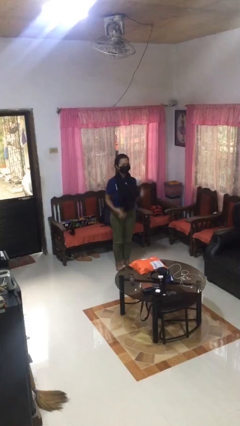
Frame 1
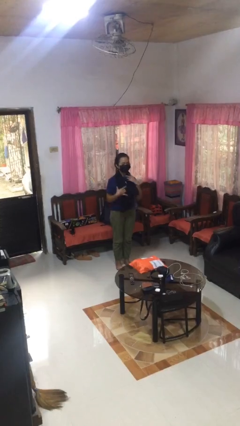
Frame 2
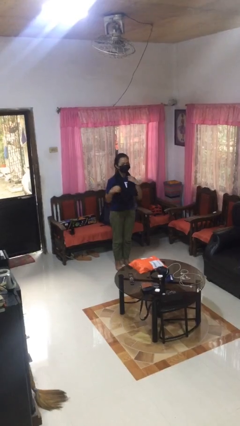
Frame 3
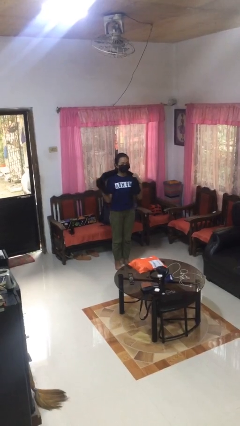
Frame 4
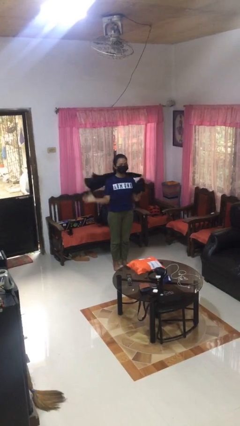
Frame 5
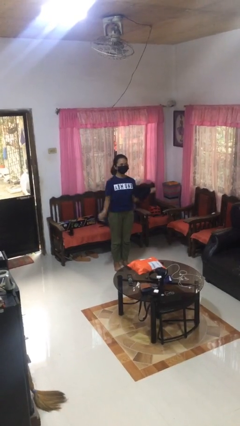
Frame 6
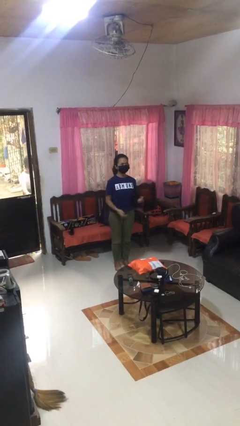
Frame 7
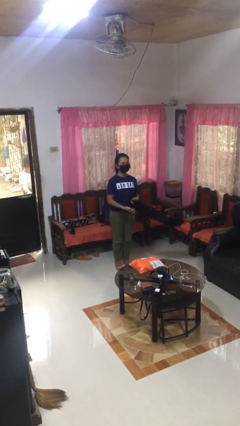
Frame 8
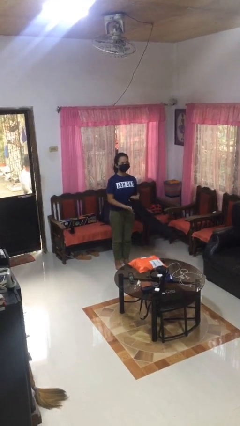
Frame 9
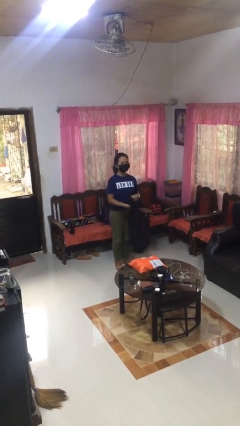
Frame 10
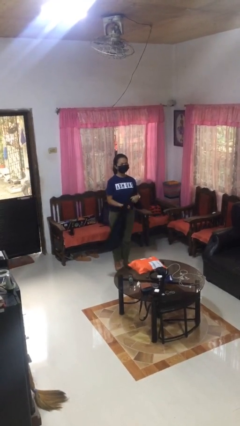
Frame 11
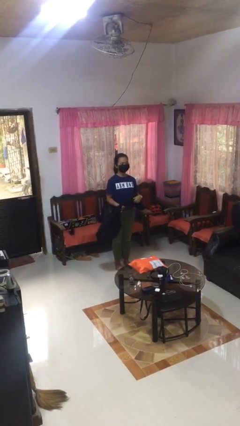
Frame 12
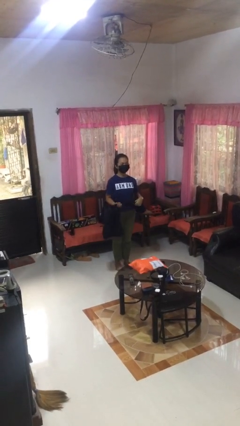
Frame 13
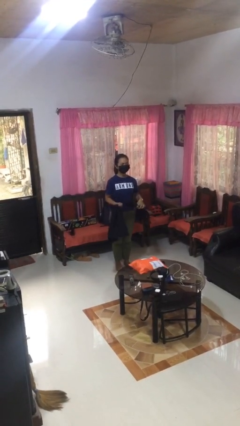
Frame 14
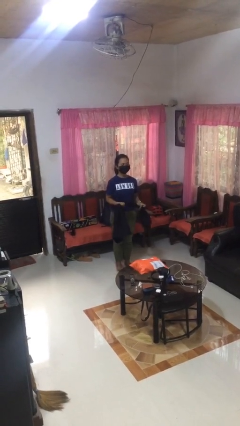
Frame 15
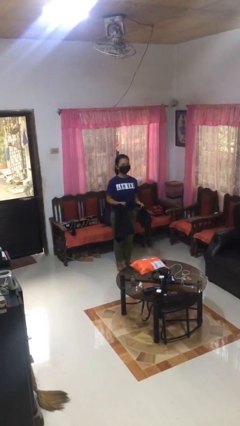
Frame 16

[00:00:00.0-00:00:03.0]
person takes off scarf

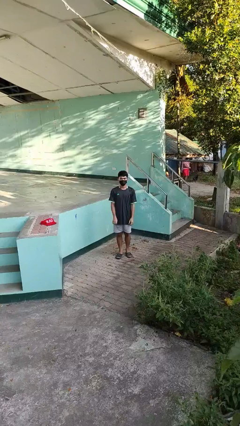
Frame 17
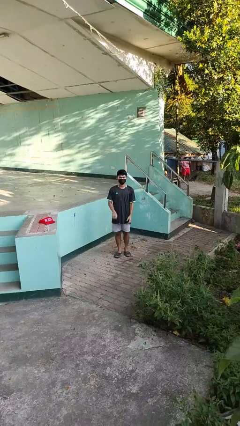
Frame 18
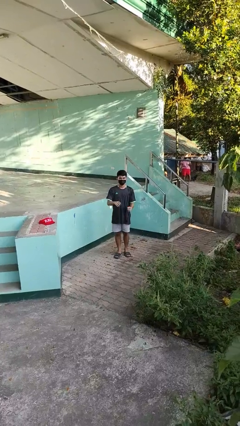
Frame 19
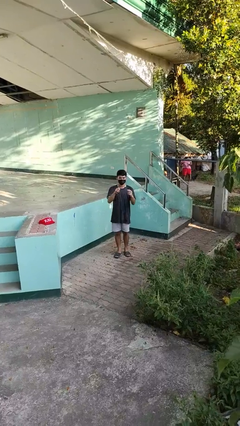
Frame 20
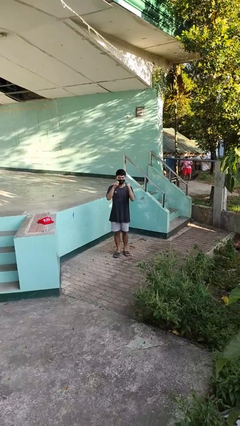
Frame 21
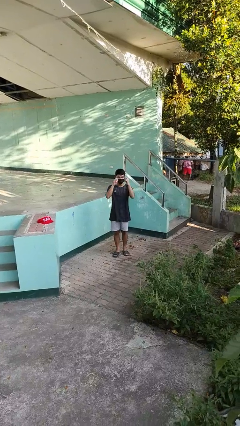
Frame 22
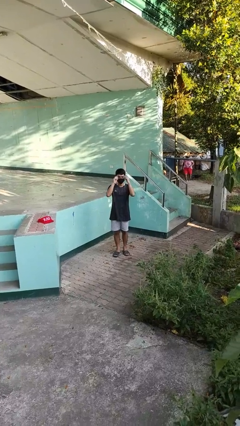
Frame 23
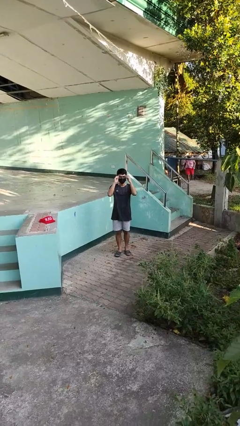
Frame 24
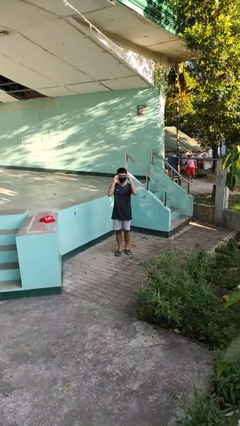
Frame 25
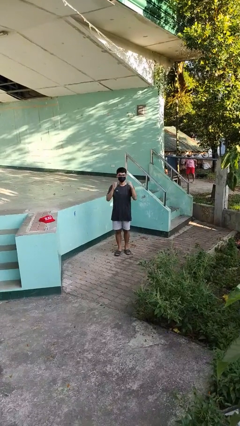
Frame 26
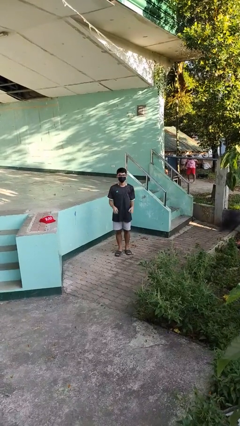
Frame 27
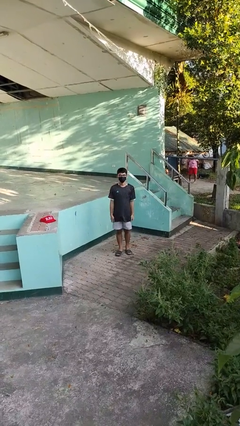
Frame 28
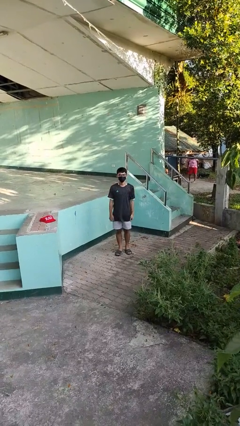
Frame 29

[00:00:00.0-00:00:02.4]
person puts on glasses

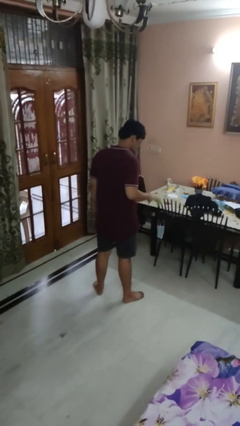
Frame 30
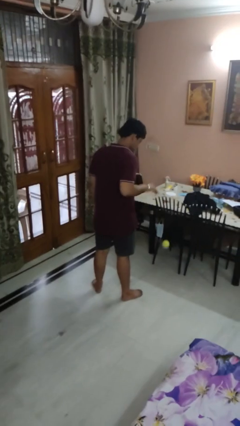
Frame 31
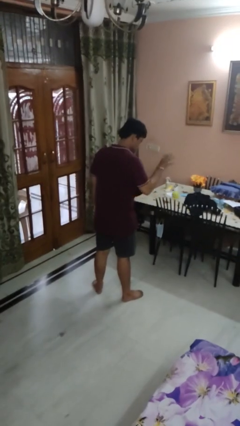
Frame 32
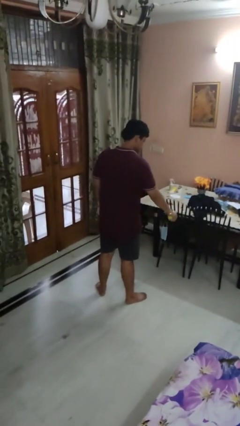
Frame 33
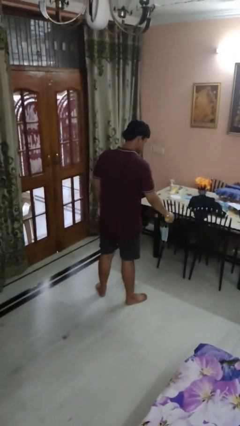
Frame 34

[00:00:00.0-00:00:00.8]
person bounces ball on floor

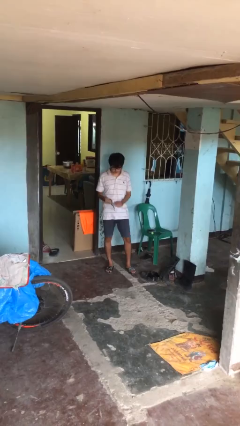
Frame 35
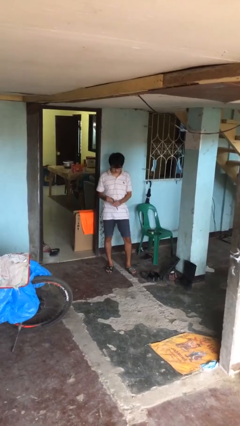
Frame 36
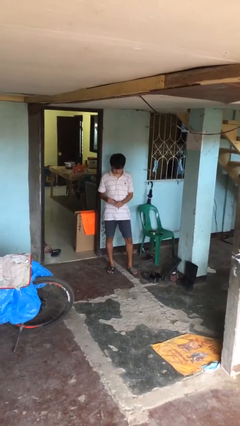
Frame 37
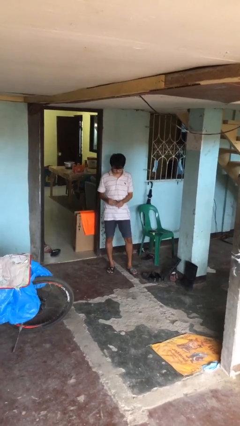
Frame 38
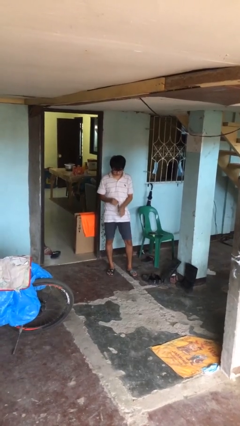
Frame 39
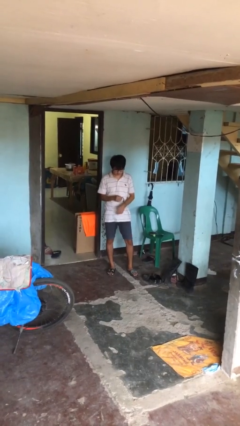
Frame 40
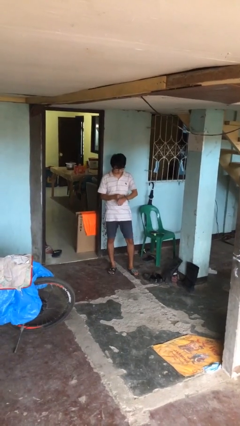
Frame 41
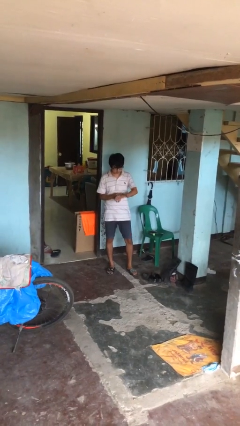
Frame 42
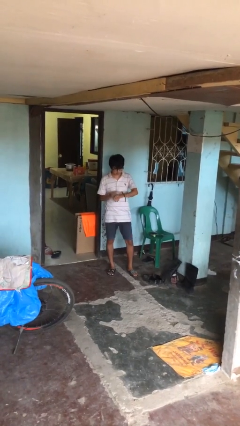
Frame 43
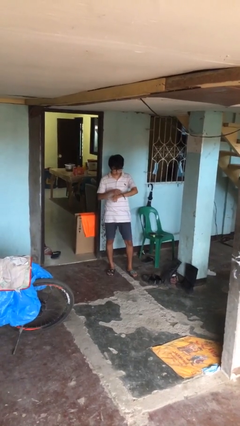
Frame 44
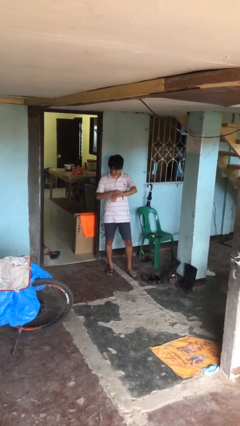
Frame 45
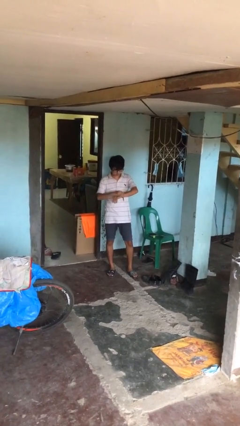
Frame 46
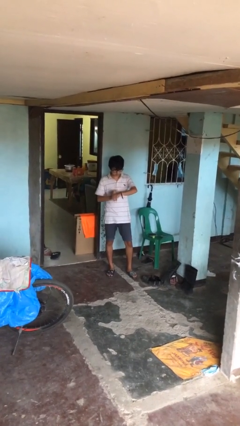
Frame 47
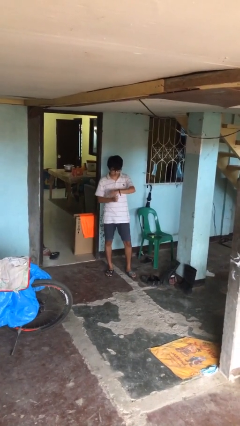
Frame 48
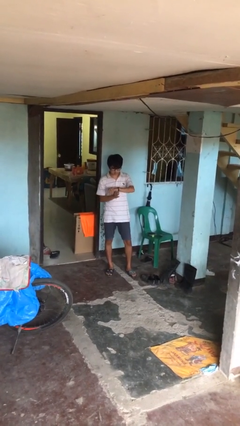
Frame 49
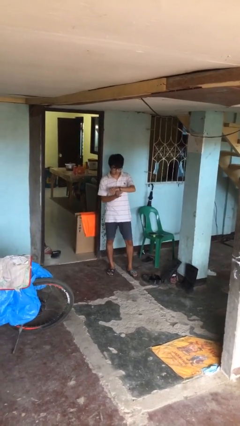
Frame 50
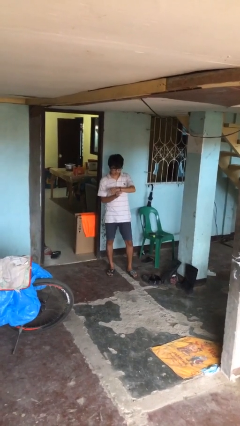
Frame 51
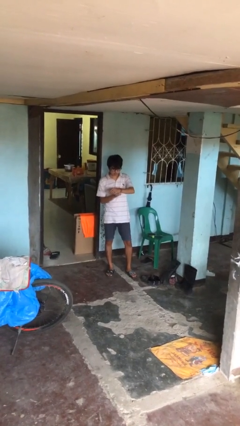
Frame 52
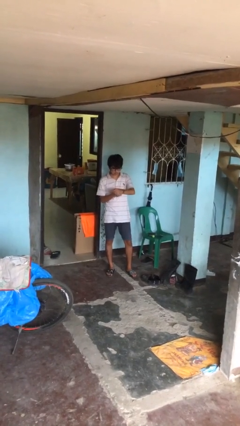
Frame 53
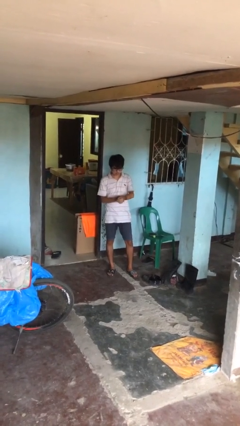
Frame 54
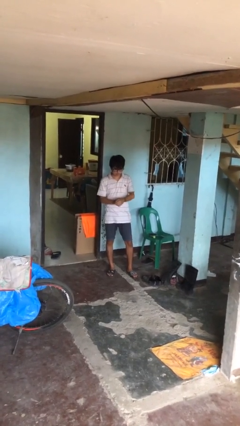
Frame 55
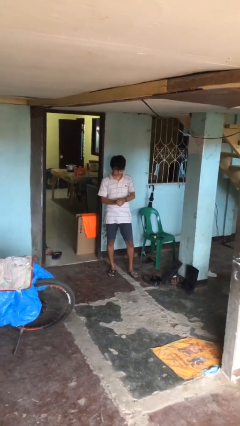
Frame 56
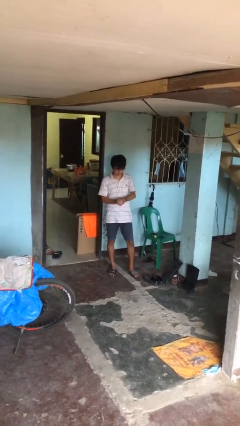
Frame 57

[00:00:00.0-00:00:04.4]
person puts on wristwatch

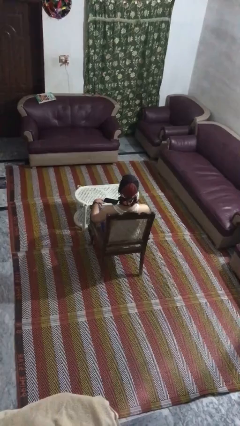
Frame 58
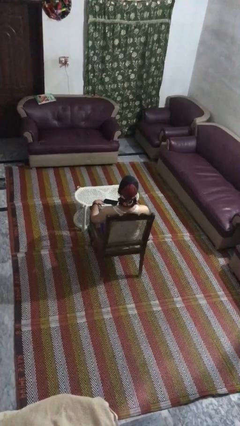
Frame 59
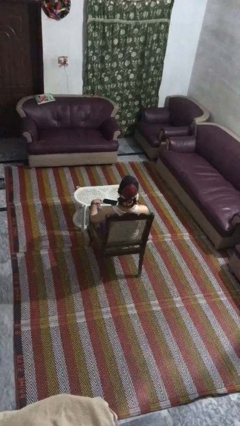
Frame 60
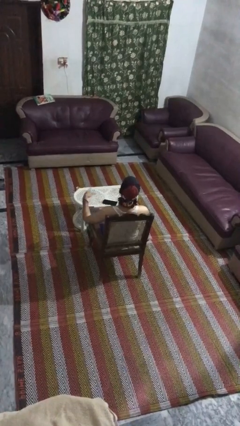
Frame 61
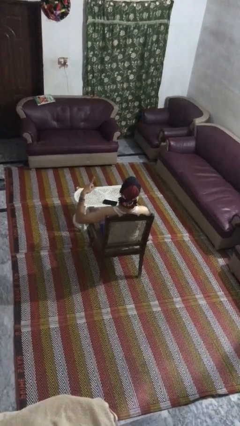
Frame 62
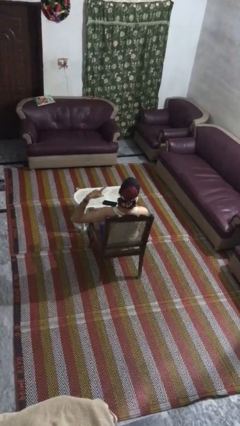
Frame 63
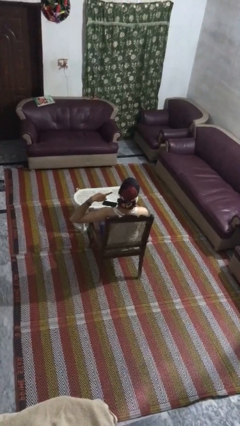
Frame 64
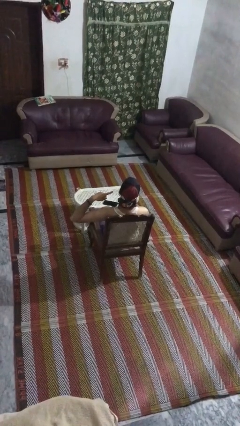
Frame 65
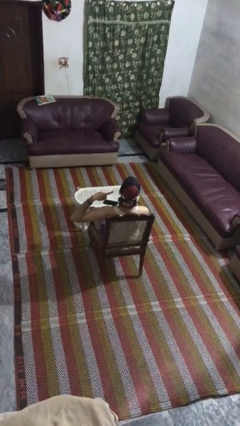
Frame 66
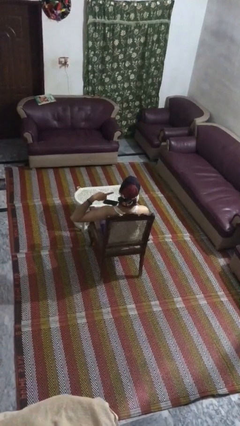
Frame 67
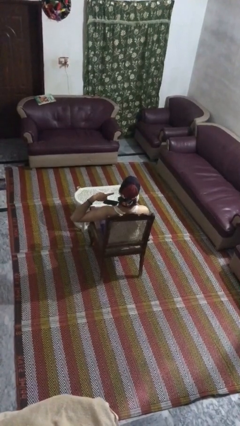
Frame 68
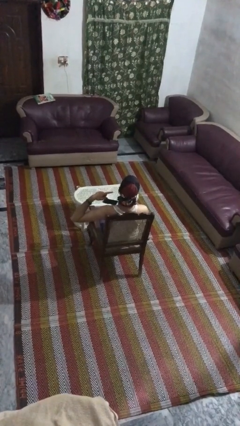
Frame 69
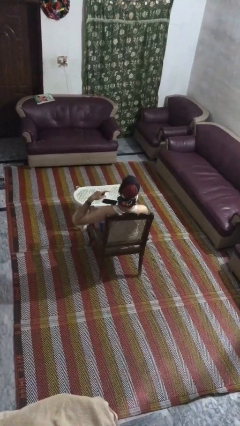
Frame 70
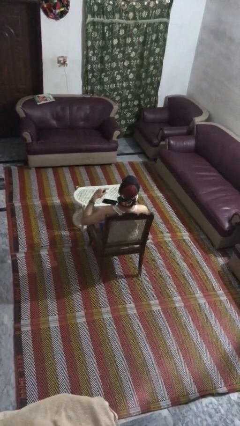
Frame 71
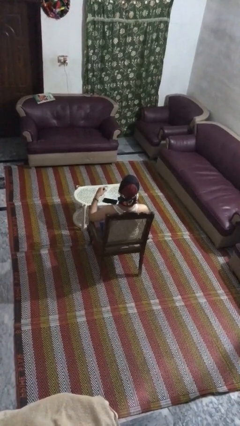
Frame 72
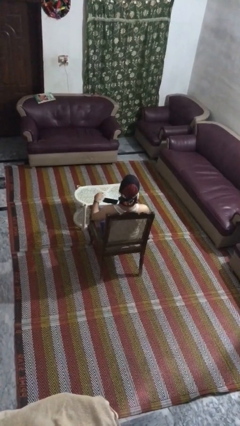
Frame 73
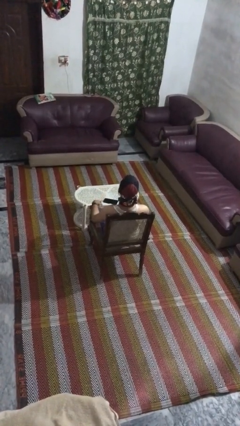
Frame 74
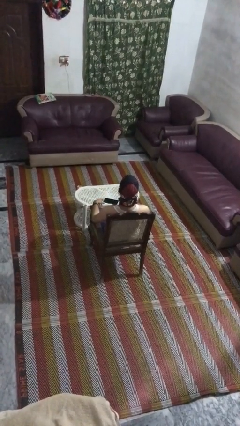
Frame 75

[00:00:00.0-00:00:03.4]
person gestures listen closely

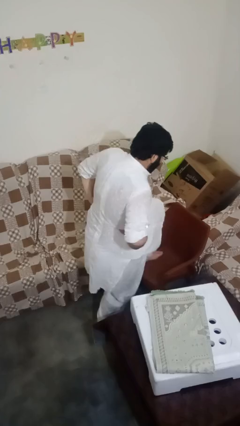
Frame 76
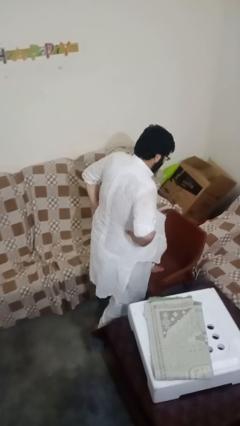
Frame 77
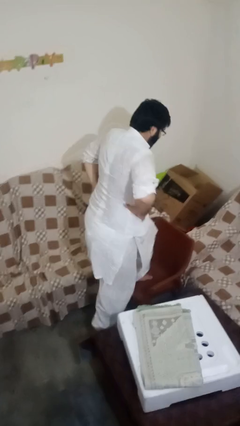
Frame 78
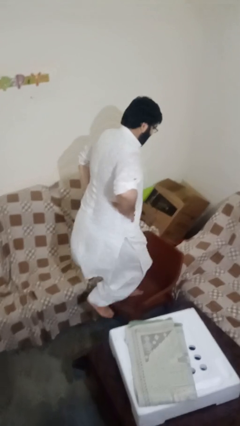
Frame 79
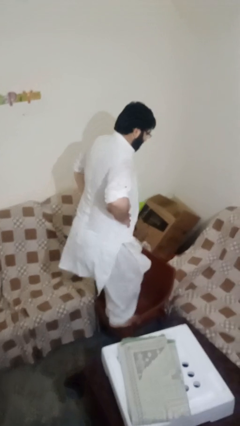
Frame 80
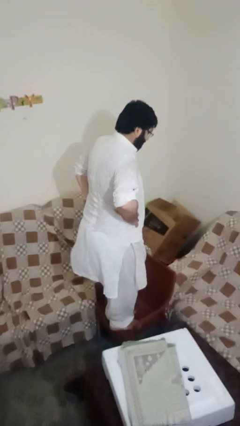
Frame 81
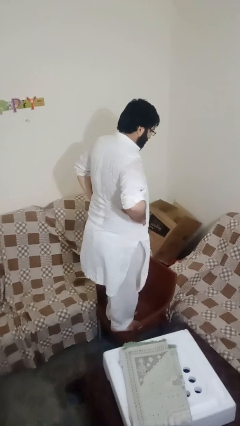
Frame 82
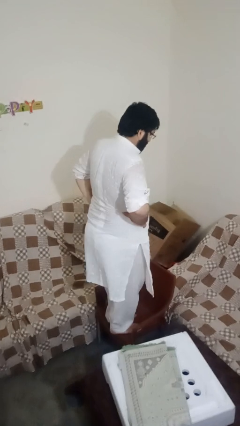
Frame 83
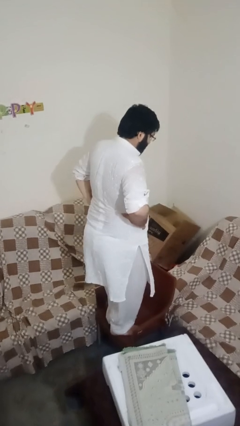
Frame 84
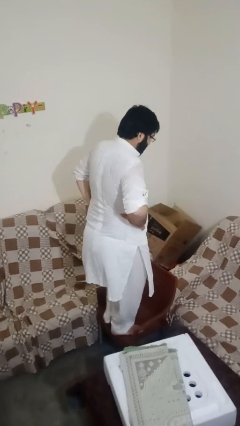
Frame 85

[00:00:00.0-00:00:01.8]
person climbs on chair

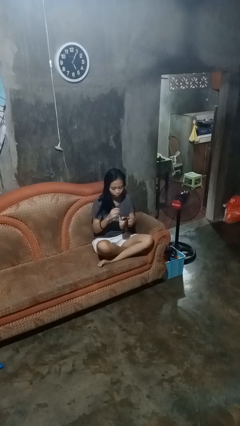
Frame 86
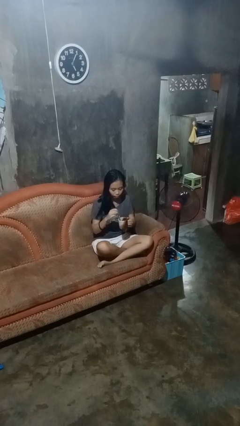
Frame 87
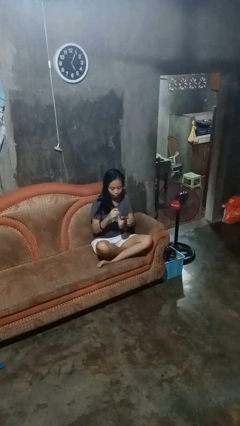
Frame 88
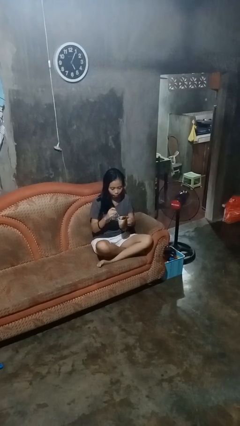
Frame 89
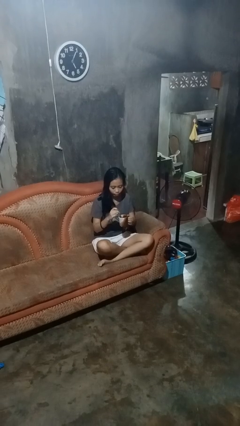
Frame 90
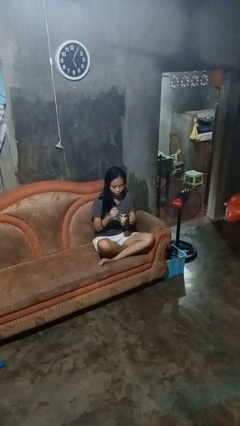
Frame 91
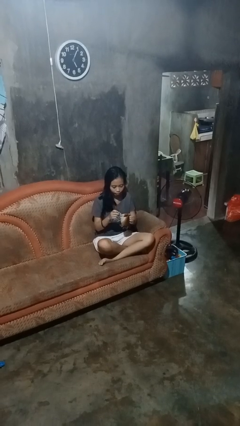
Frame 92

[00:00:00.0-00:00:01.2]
person stirs mug
